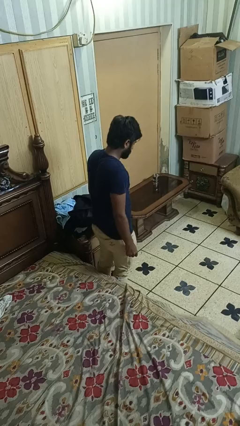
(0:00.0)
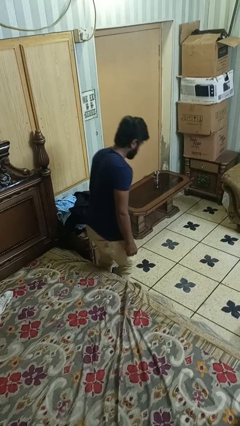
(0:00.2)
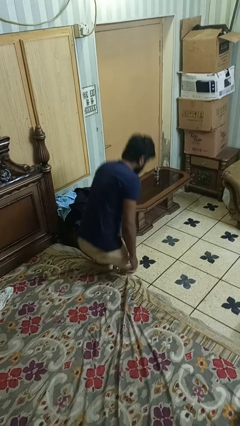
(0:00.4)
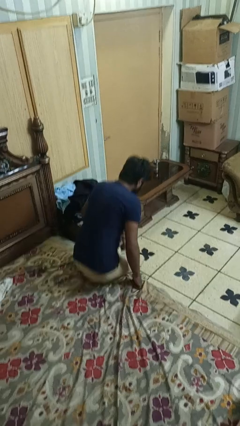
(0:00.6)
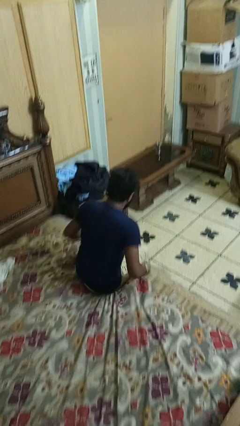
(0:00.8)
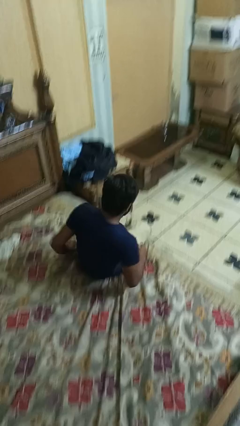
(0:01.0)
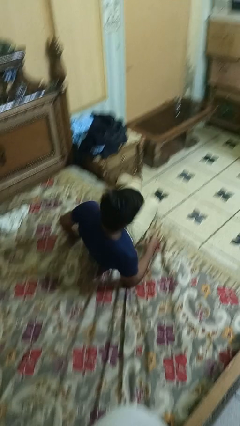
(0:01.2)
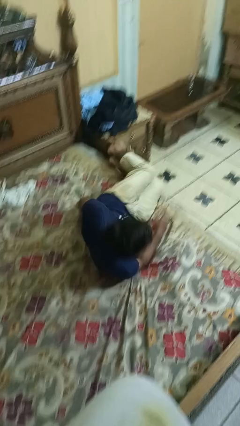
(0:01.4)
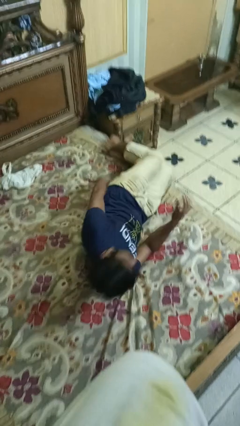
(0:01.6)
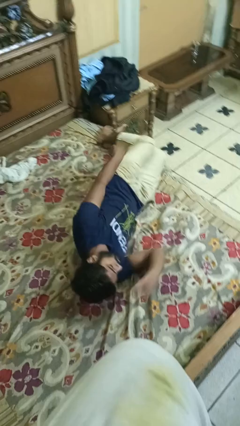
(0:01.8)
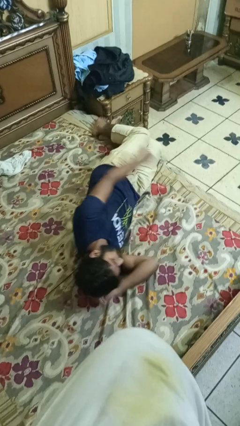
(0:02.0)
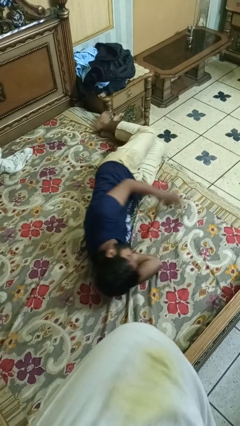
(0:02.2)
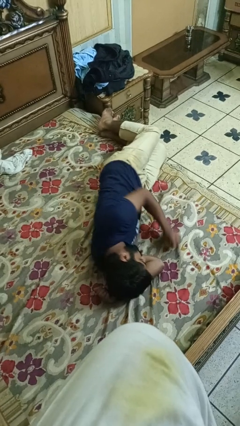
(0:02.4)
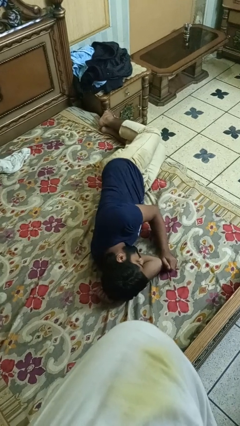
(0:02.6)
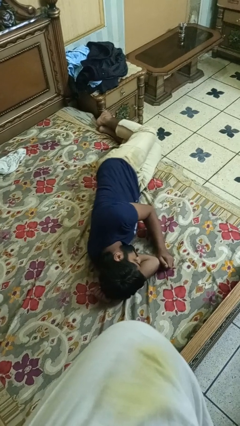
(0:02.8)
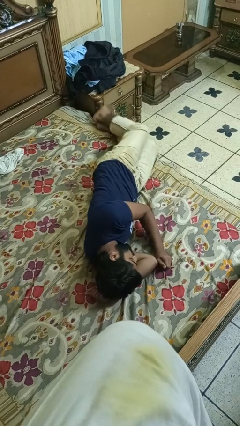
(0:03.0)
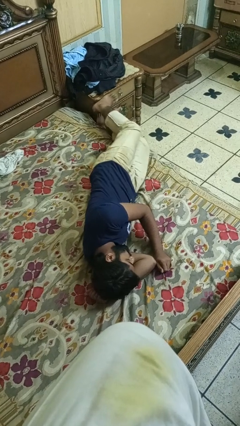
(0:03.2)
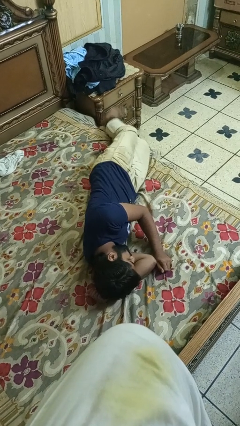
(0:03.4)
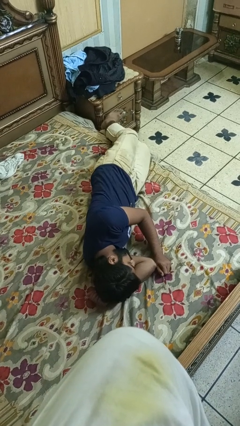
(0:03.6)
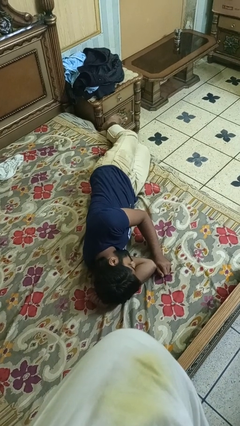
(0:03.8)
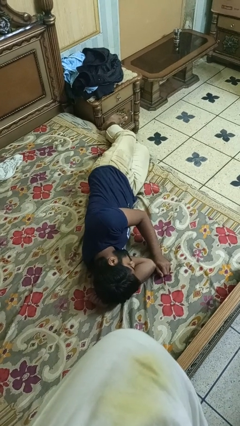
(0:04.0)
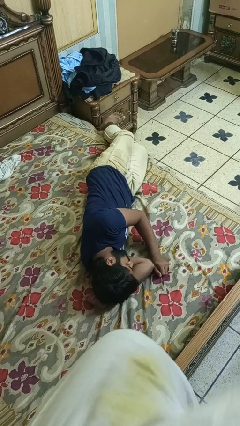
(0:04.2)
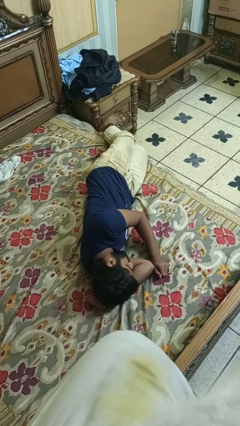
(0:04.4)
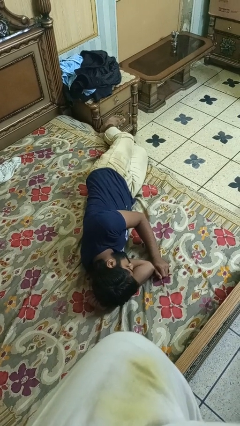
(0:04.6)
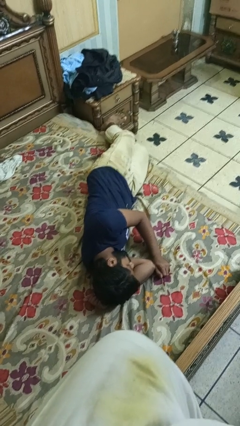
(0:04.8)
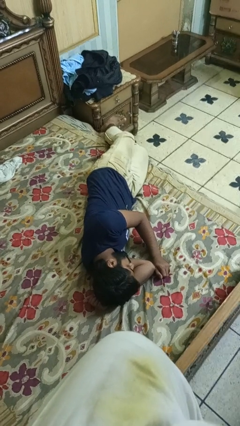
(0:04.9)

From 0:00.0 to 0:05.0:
person lies down on bed

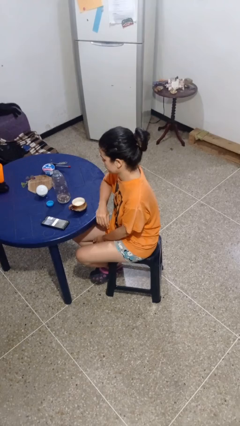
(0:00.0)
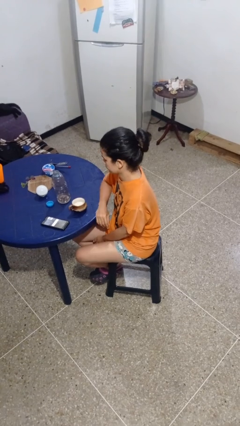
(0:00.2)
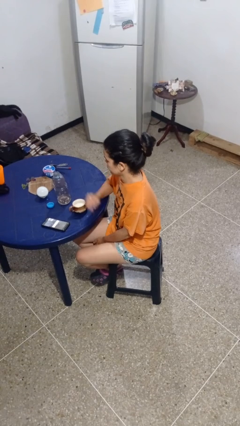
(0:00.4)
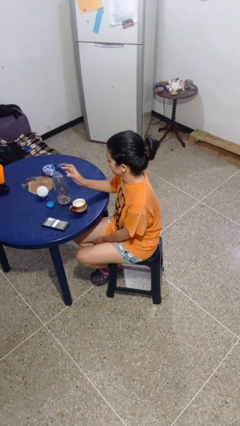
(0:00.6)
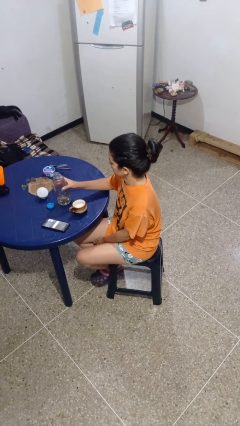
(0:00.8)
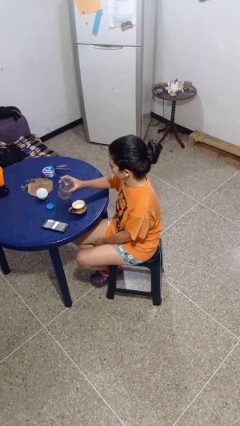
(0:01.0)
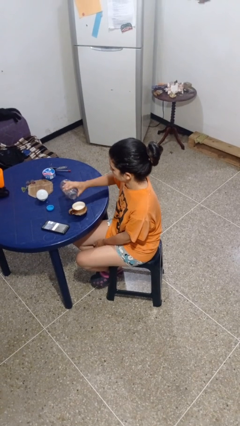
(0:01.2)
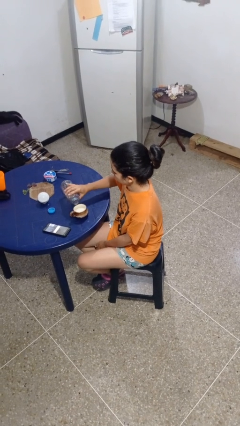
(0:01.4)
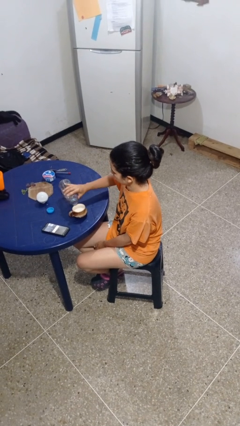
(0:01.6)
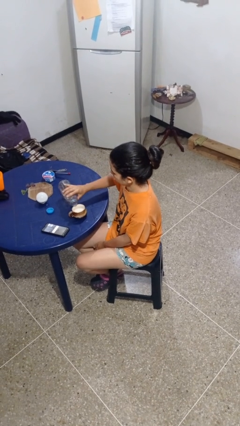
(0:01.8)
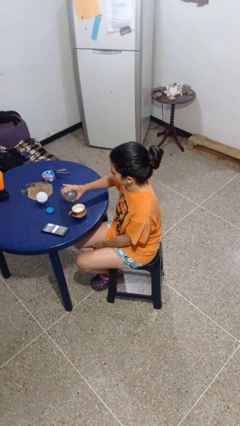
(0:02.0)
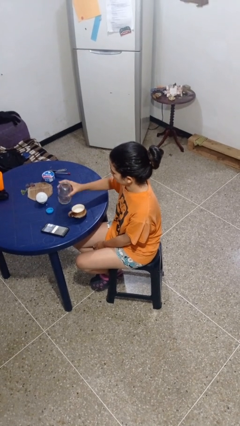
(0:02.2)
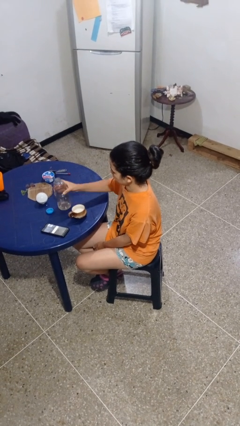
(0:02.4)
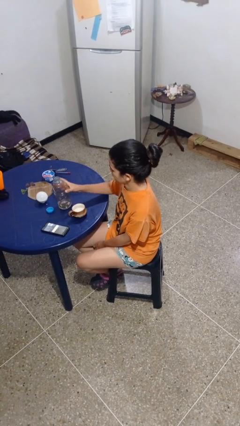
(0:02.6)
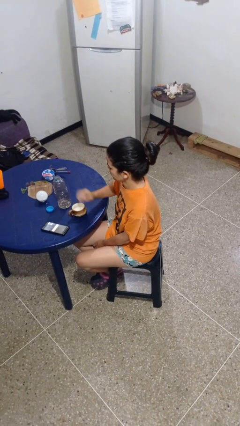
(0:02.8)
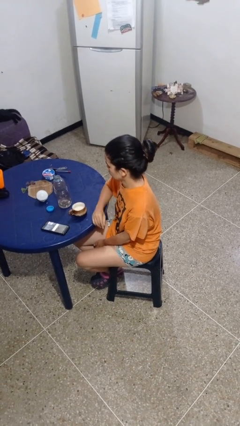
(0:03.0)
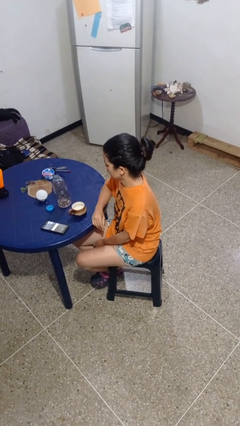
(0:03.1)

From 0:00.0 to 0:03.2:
person pours liquid into cup

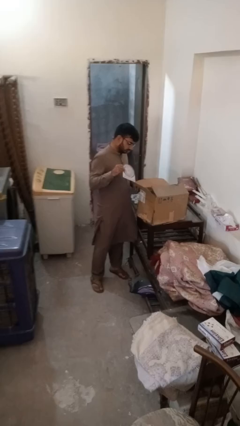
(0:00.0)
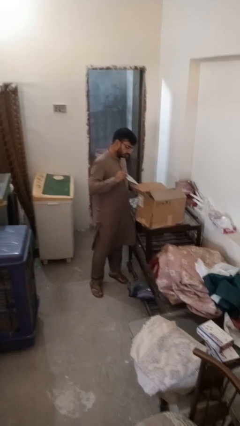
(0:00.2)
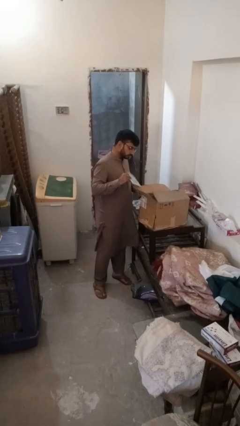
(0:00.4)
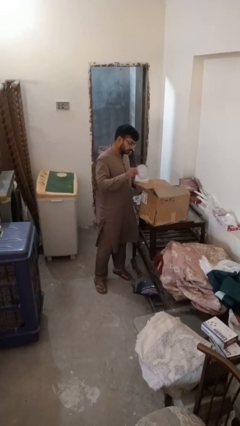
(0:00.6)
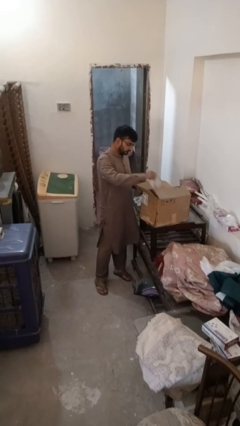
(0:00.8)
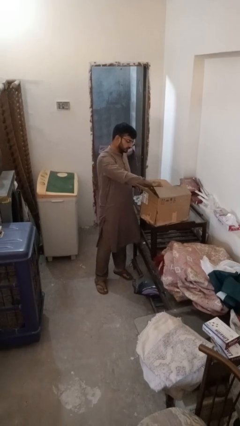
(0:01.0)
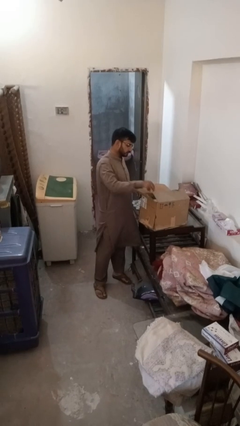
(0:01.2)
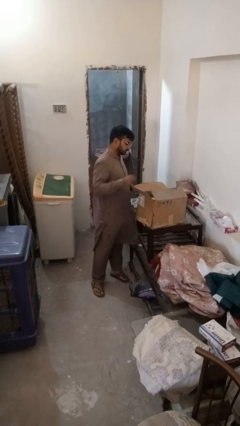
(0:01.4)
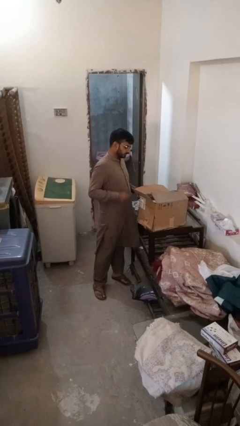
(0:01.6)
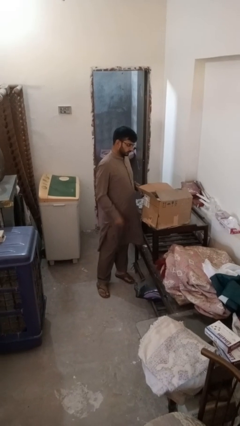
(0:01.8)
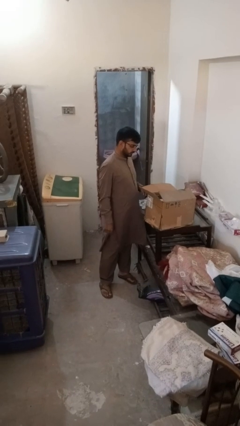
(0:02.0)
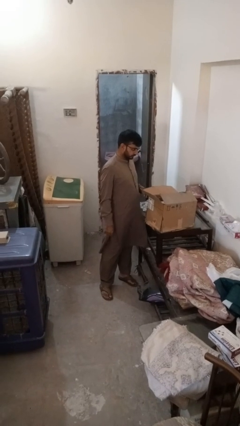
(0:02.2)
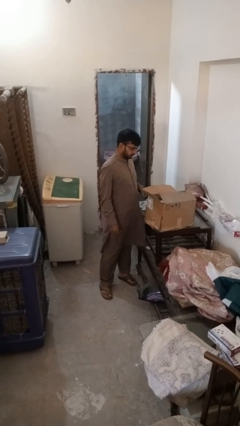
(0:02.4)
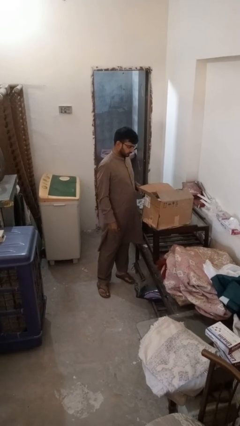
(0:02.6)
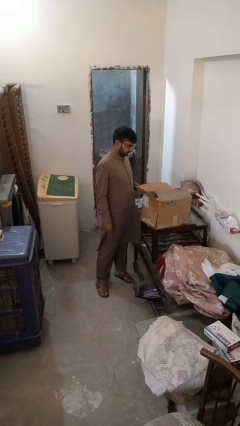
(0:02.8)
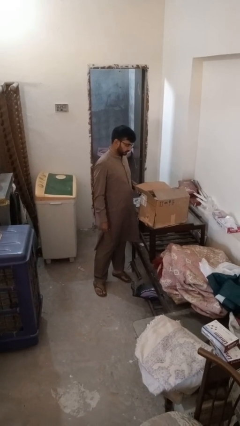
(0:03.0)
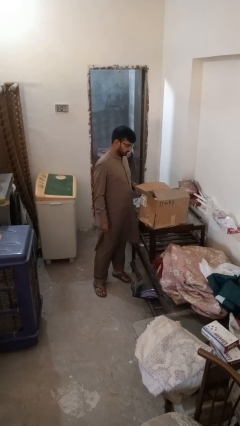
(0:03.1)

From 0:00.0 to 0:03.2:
person puts object into box

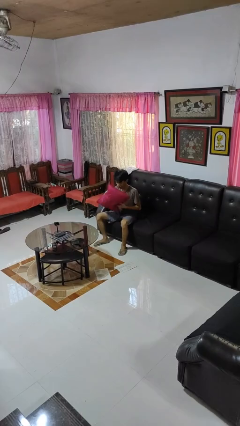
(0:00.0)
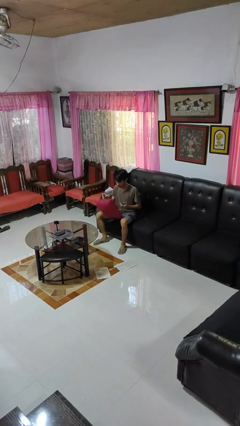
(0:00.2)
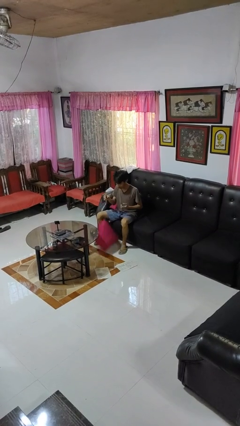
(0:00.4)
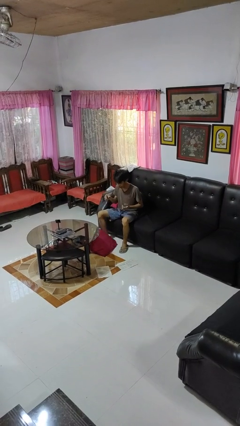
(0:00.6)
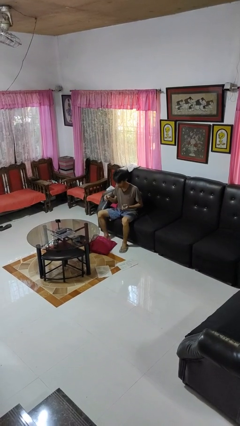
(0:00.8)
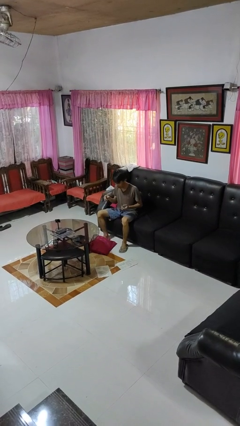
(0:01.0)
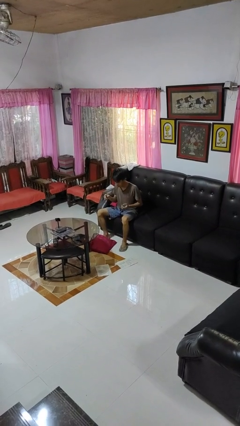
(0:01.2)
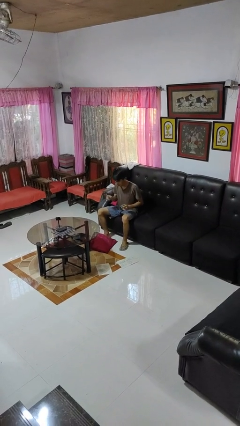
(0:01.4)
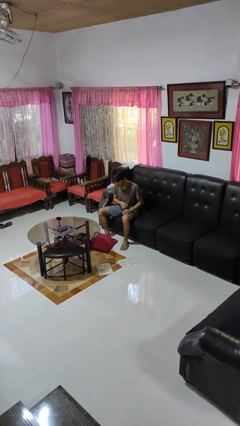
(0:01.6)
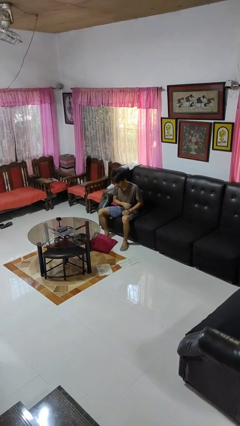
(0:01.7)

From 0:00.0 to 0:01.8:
person drops object

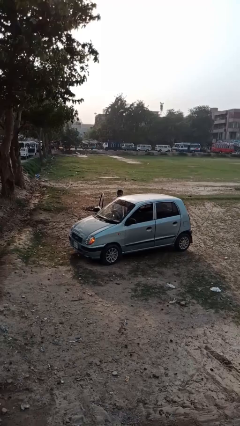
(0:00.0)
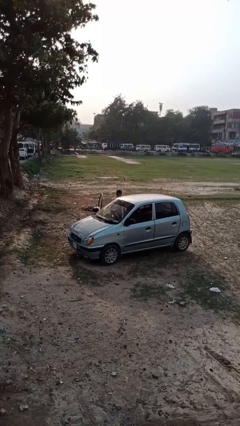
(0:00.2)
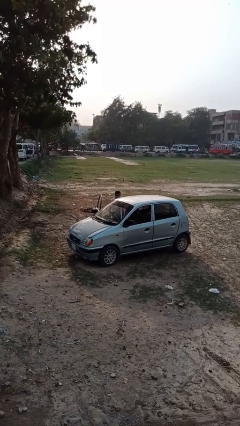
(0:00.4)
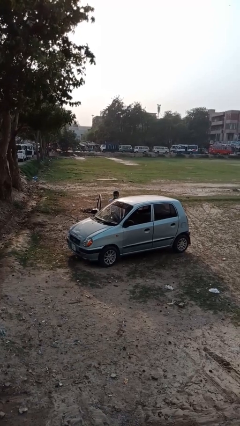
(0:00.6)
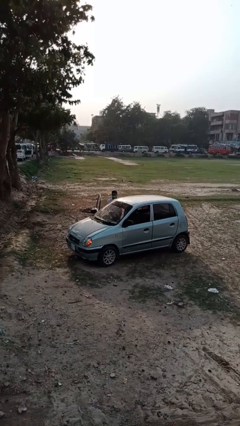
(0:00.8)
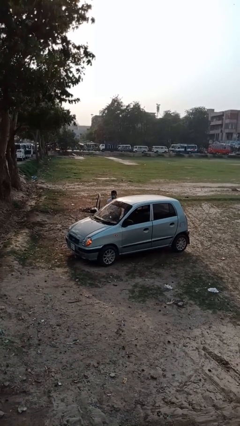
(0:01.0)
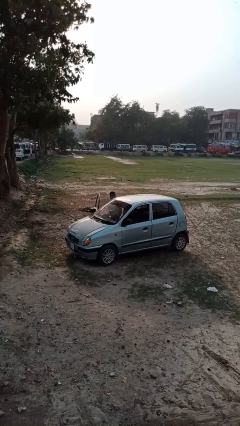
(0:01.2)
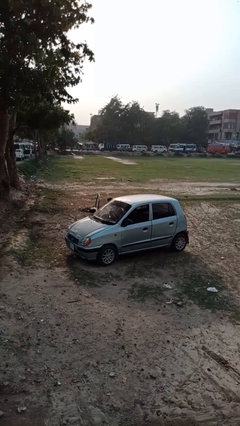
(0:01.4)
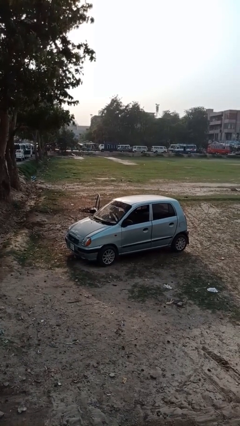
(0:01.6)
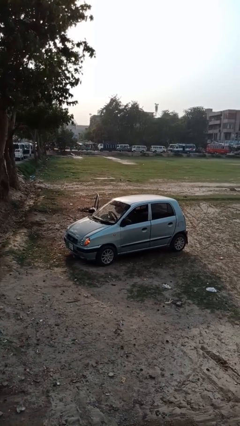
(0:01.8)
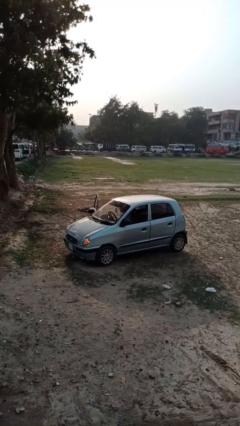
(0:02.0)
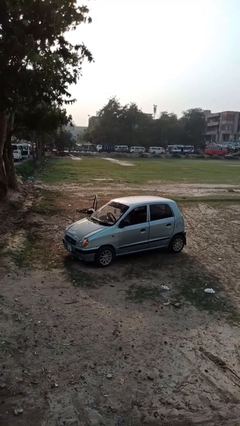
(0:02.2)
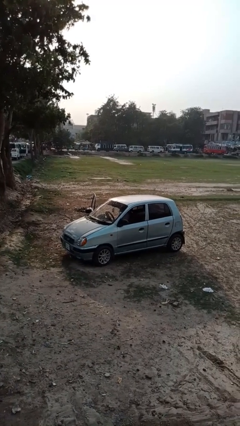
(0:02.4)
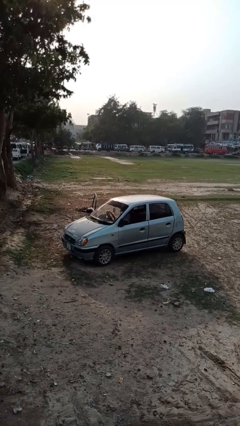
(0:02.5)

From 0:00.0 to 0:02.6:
person enters car

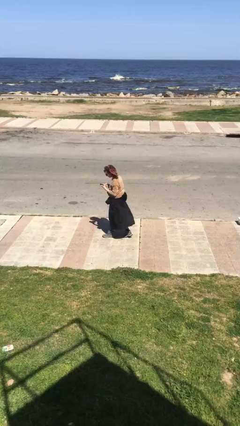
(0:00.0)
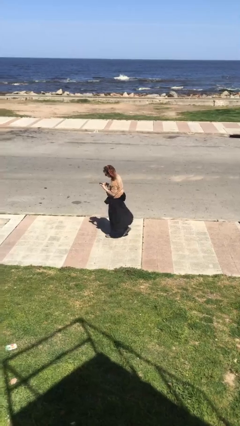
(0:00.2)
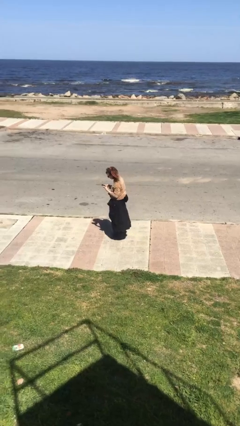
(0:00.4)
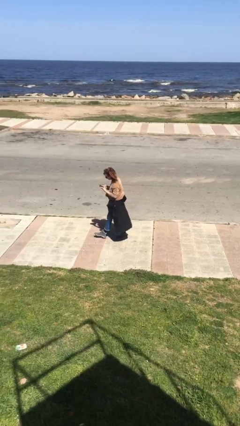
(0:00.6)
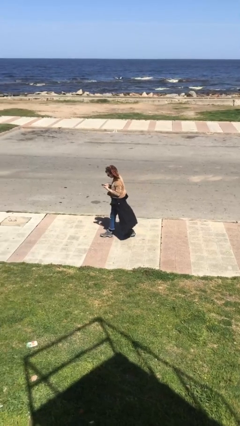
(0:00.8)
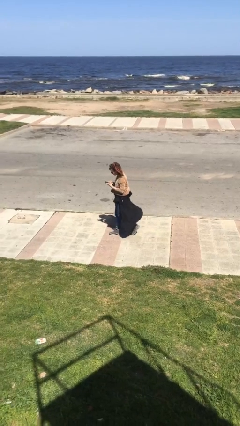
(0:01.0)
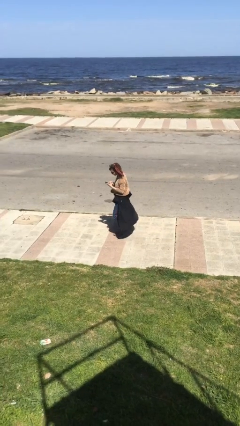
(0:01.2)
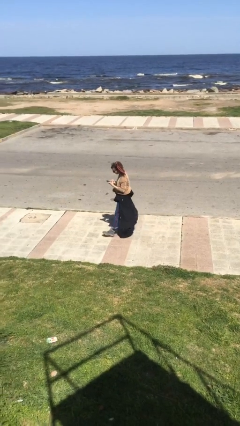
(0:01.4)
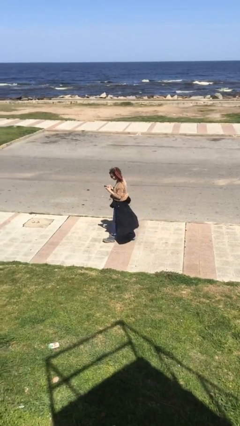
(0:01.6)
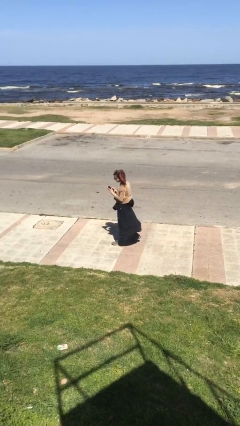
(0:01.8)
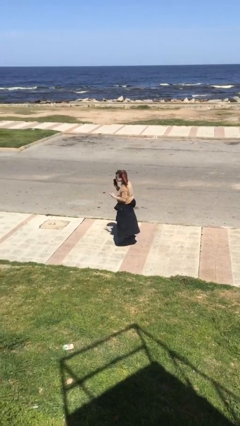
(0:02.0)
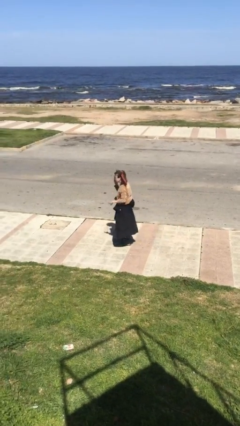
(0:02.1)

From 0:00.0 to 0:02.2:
person texts on phone
